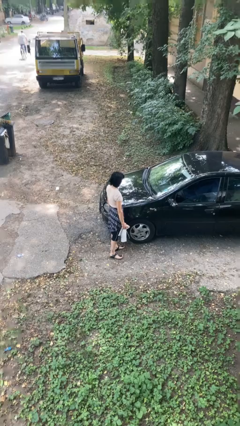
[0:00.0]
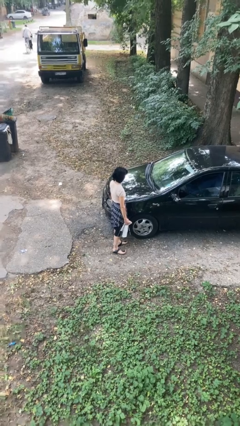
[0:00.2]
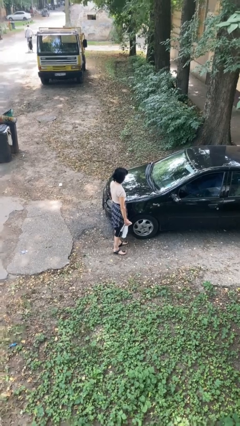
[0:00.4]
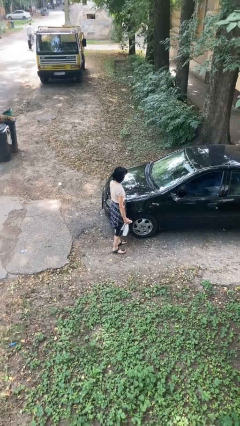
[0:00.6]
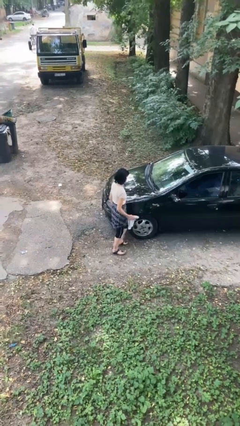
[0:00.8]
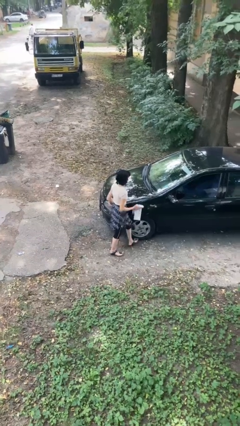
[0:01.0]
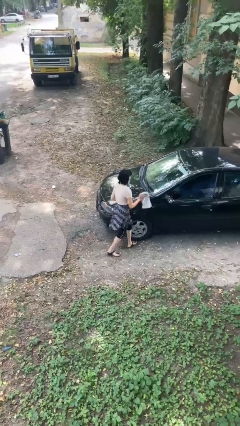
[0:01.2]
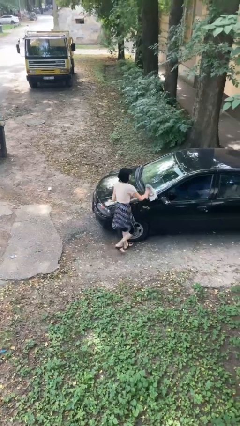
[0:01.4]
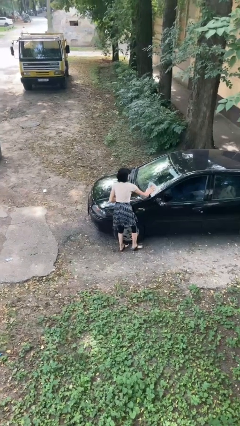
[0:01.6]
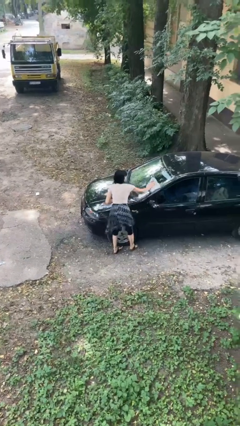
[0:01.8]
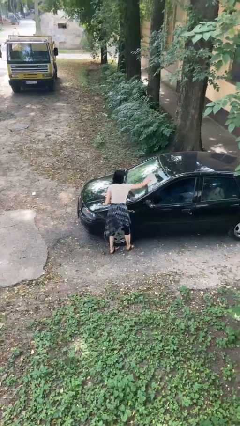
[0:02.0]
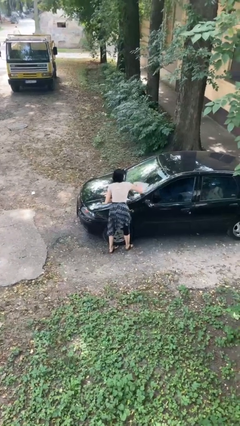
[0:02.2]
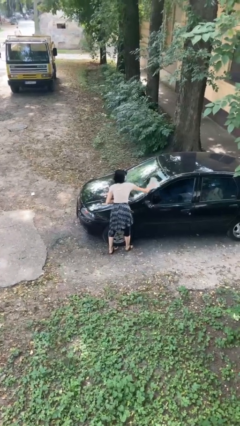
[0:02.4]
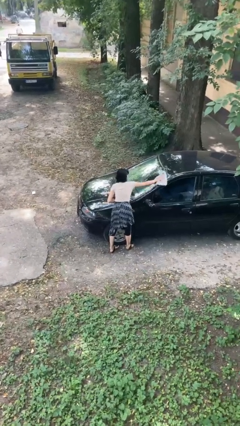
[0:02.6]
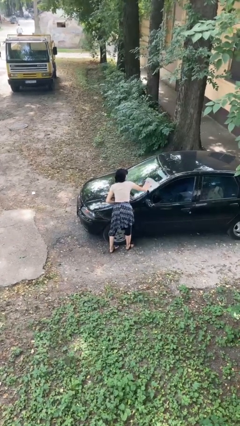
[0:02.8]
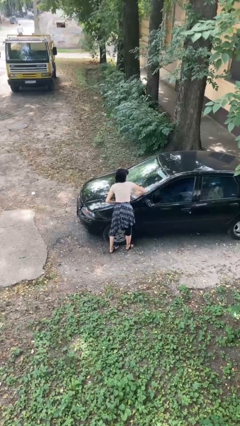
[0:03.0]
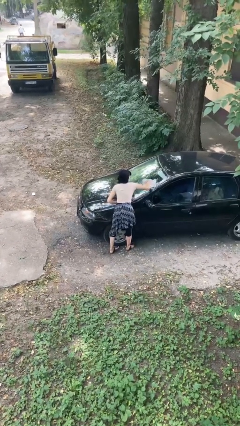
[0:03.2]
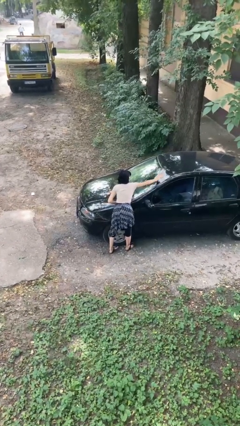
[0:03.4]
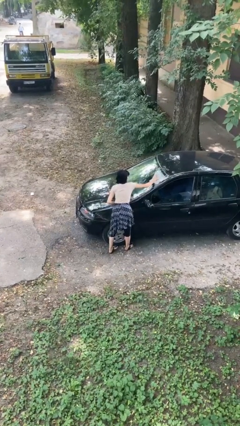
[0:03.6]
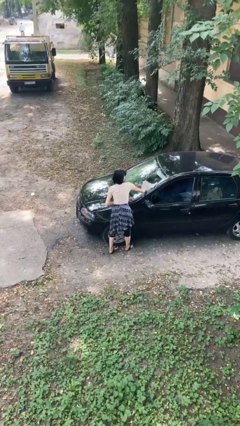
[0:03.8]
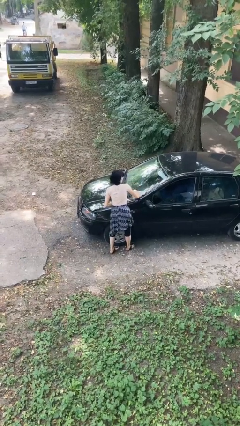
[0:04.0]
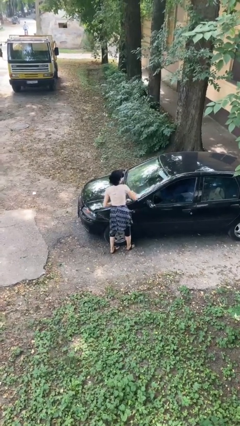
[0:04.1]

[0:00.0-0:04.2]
person polishes car with rag

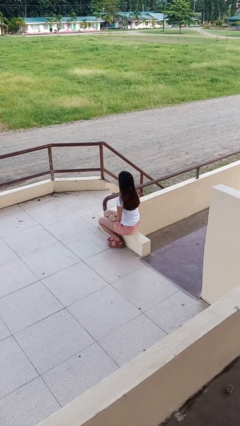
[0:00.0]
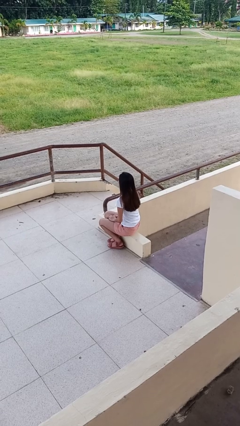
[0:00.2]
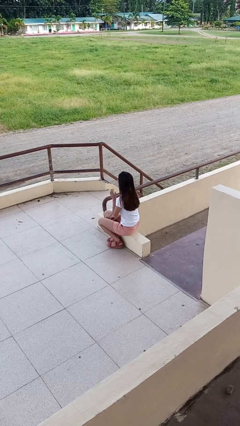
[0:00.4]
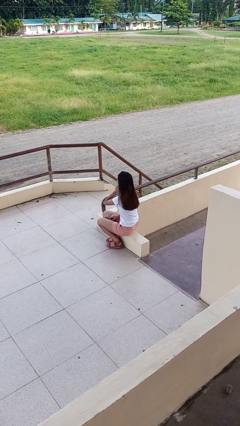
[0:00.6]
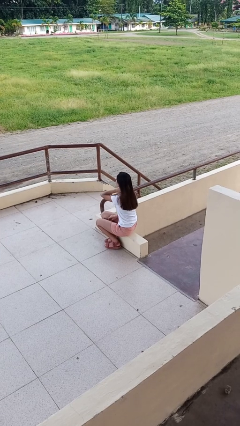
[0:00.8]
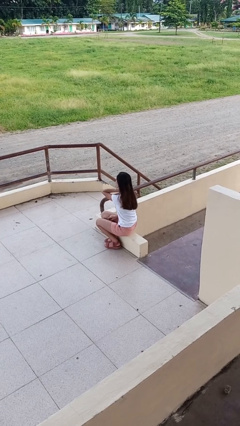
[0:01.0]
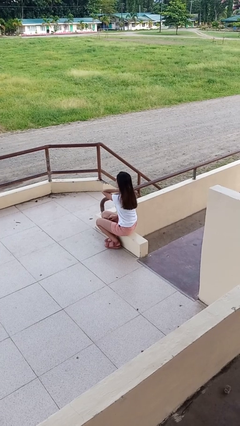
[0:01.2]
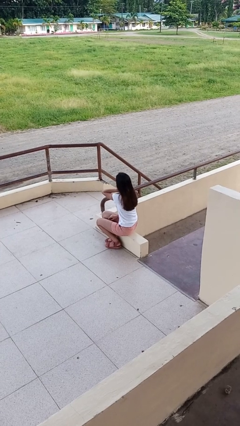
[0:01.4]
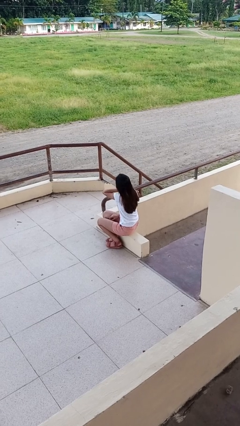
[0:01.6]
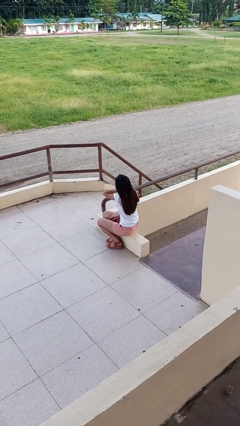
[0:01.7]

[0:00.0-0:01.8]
person rubs neck

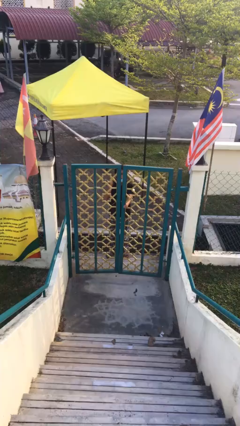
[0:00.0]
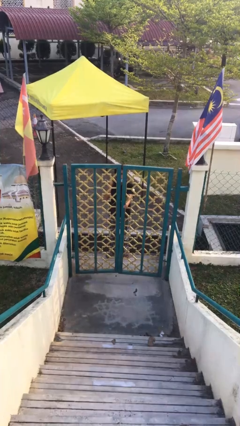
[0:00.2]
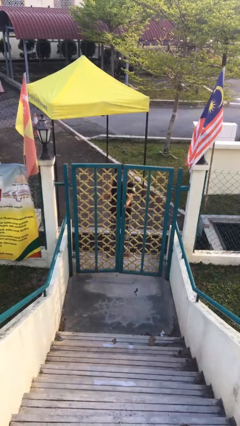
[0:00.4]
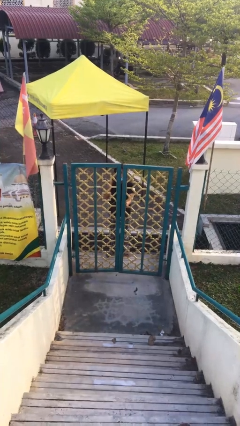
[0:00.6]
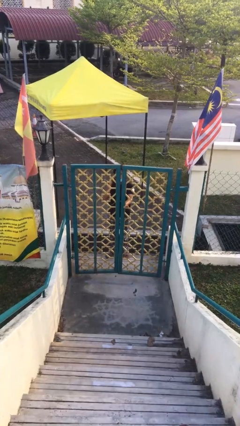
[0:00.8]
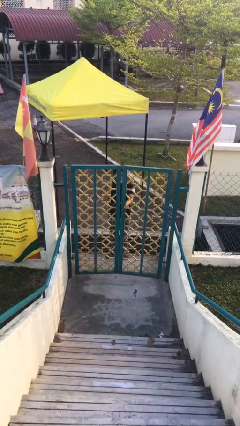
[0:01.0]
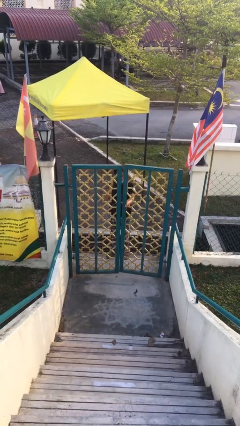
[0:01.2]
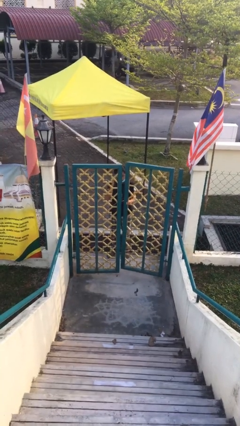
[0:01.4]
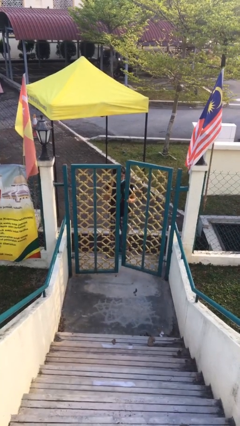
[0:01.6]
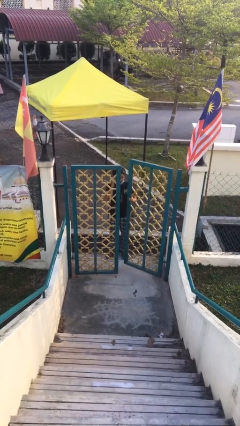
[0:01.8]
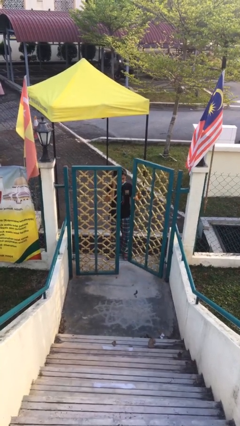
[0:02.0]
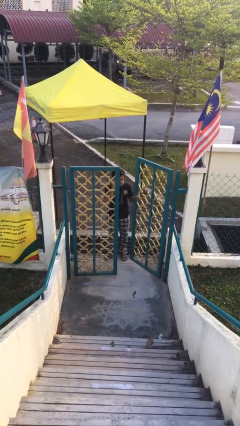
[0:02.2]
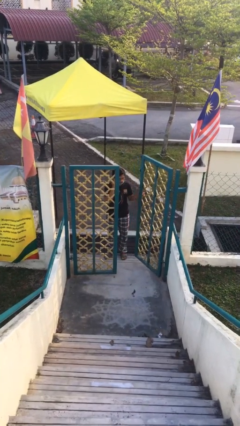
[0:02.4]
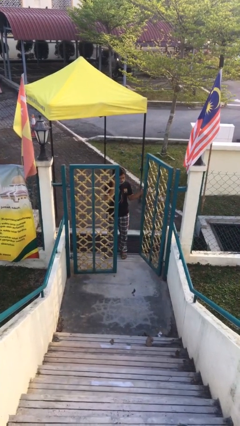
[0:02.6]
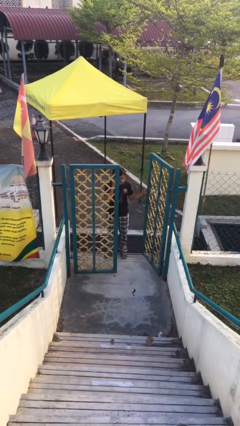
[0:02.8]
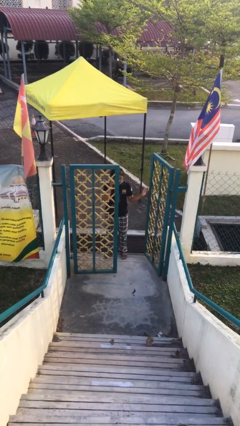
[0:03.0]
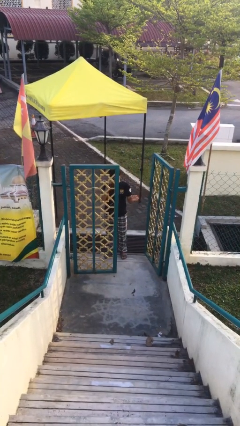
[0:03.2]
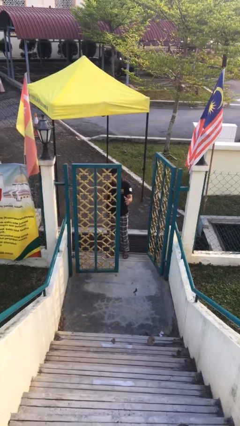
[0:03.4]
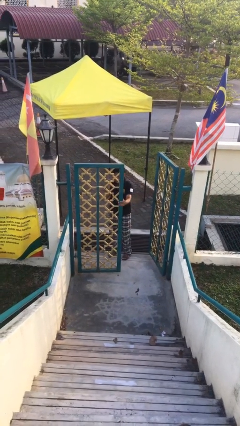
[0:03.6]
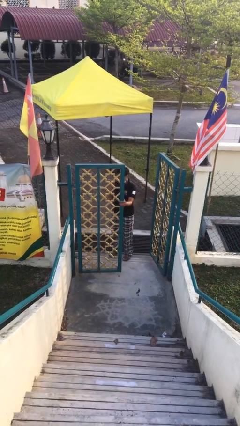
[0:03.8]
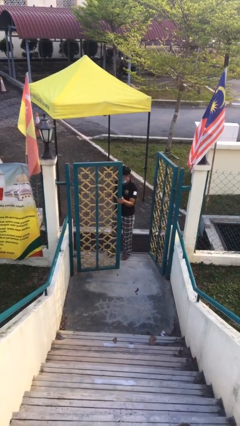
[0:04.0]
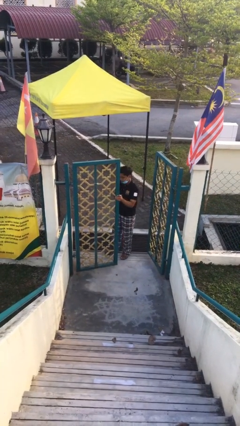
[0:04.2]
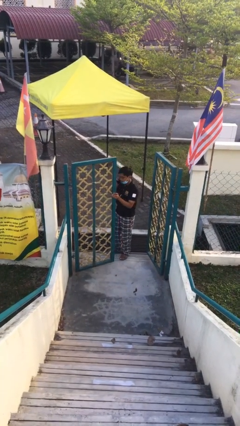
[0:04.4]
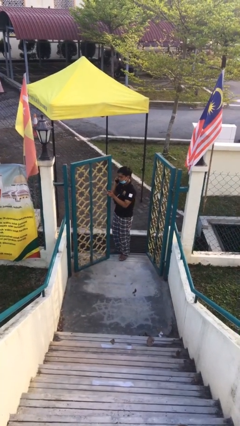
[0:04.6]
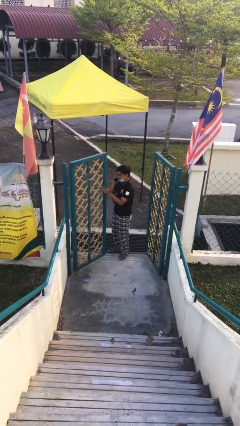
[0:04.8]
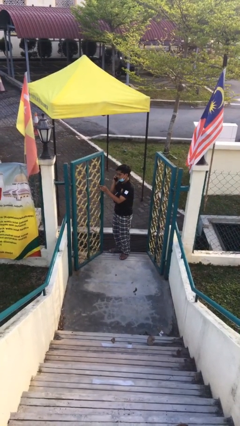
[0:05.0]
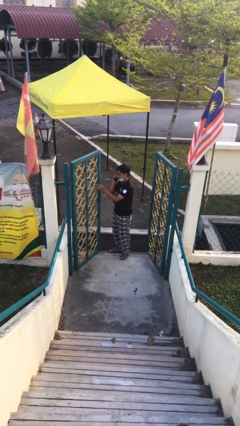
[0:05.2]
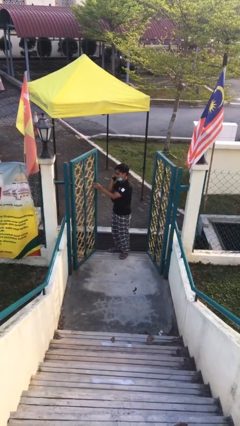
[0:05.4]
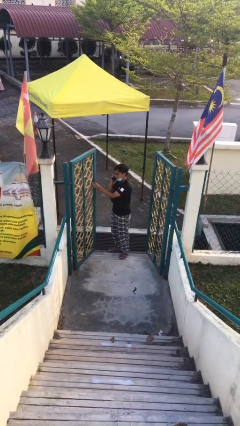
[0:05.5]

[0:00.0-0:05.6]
person opens facility door

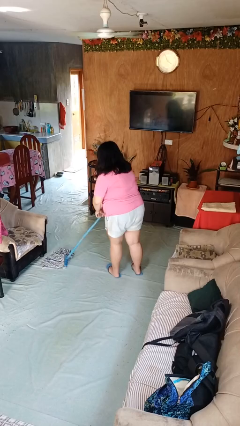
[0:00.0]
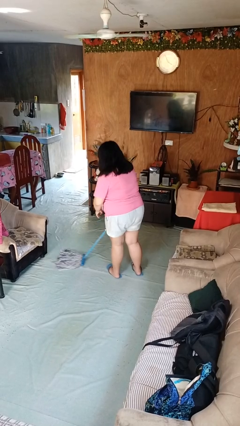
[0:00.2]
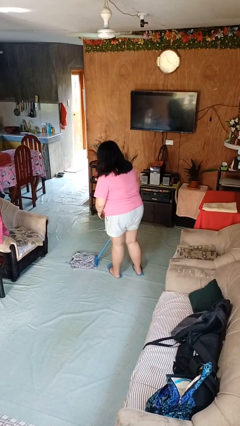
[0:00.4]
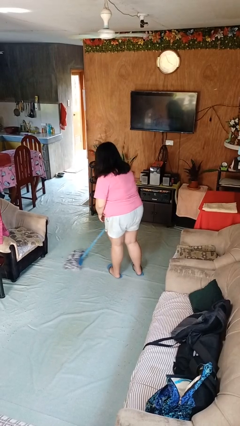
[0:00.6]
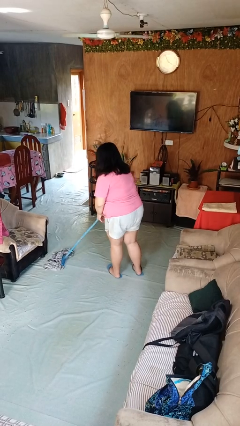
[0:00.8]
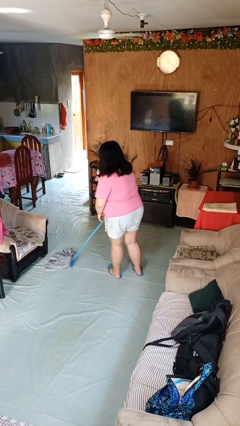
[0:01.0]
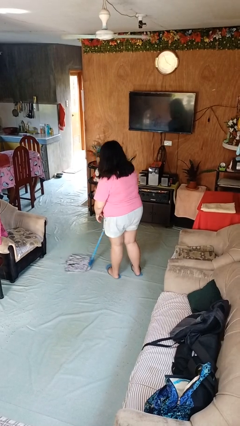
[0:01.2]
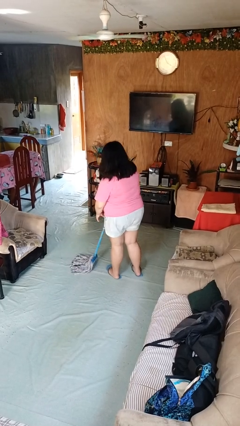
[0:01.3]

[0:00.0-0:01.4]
person mops

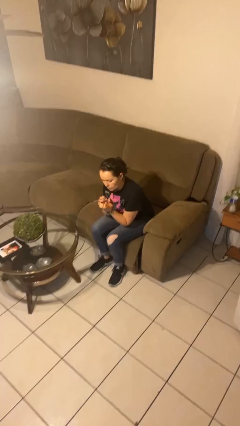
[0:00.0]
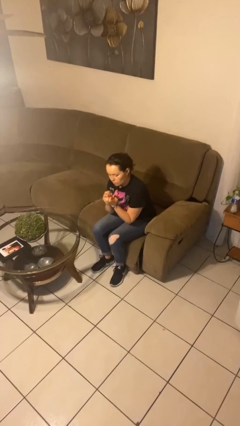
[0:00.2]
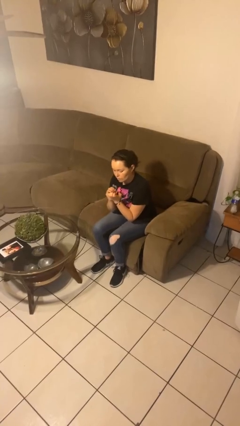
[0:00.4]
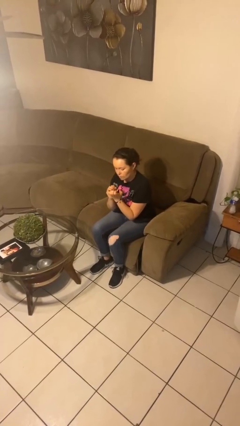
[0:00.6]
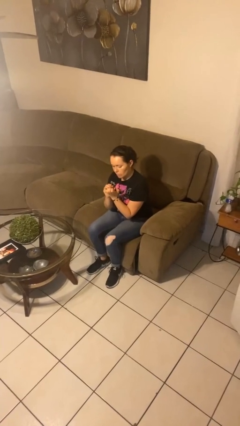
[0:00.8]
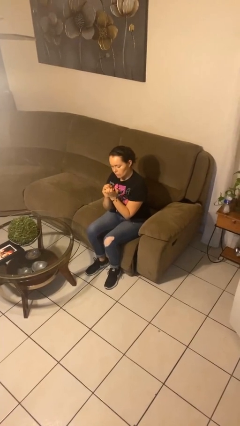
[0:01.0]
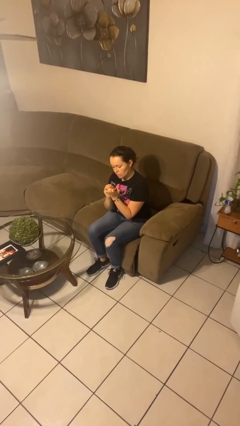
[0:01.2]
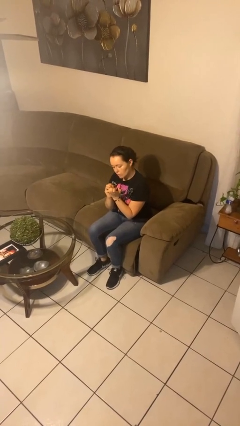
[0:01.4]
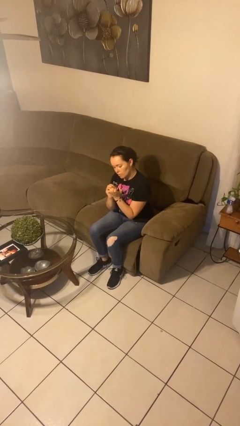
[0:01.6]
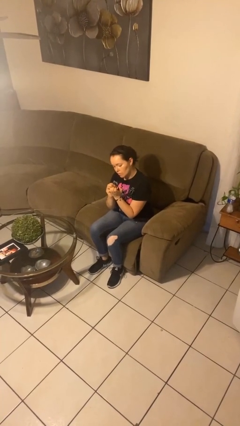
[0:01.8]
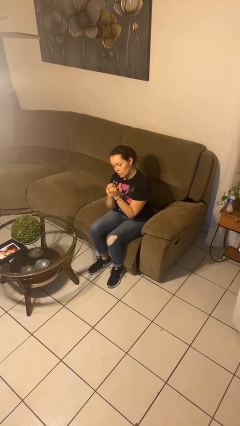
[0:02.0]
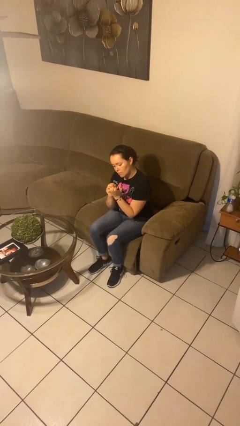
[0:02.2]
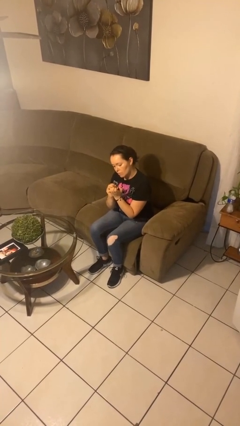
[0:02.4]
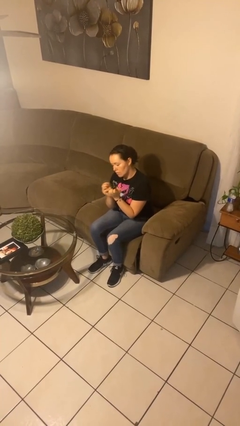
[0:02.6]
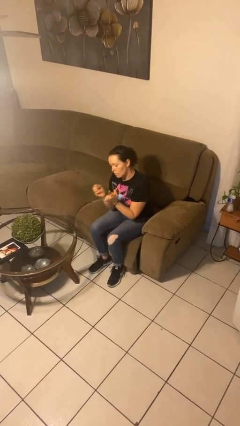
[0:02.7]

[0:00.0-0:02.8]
person paints fingernails

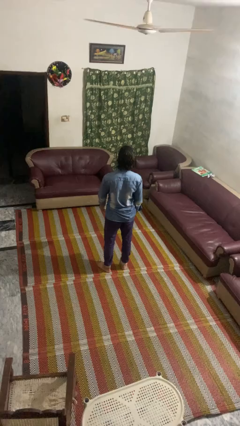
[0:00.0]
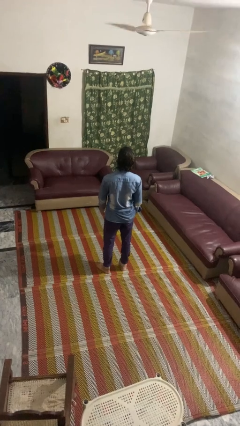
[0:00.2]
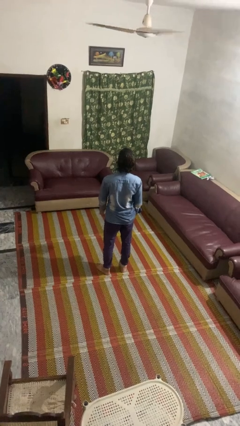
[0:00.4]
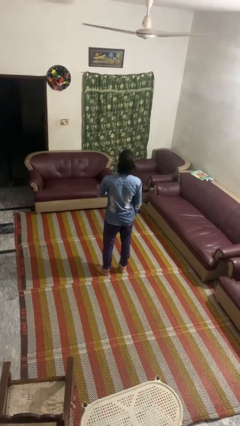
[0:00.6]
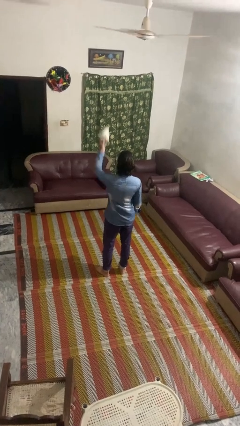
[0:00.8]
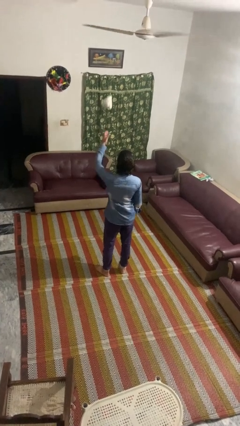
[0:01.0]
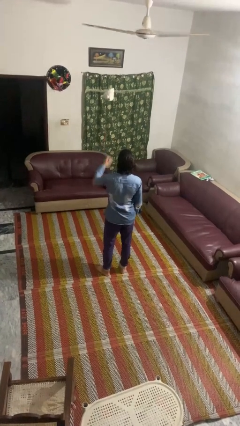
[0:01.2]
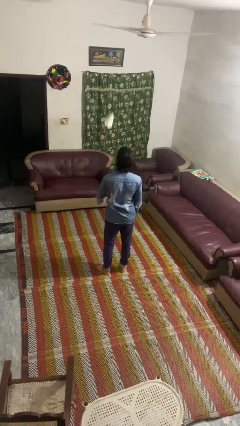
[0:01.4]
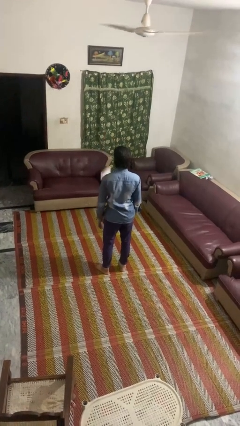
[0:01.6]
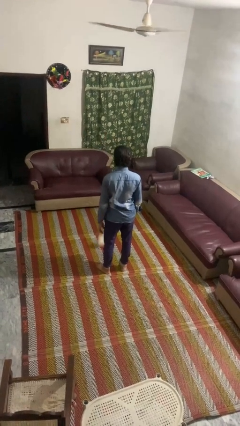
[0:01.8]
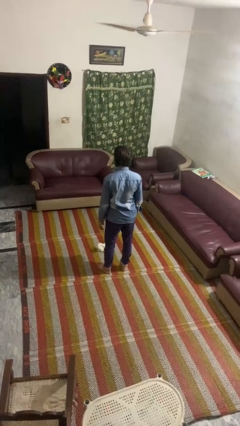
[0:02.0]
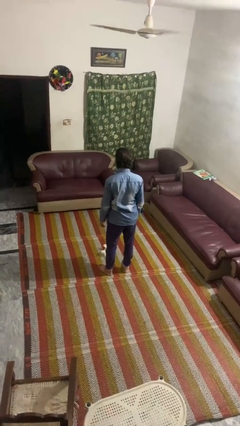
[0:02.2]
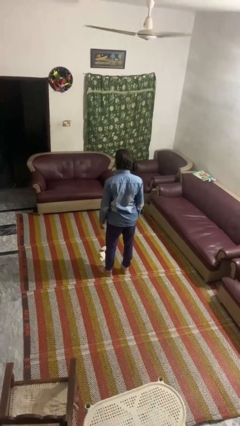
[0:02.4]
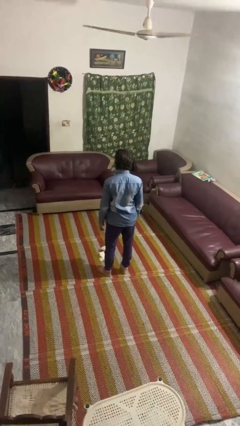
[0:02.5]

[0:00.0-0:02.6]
person throws object into air
